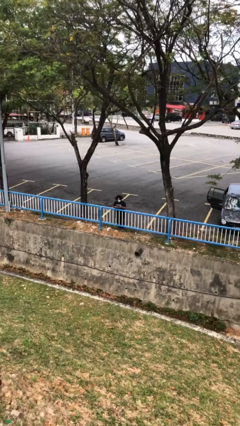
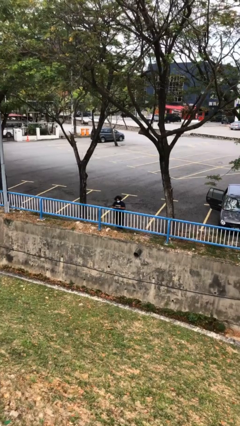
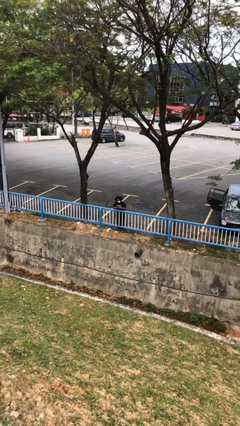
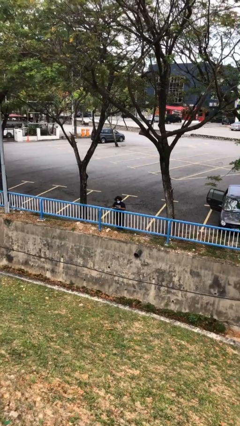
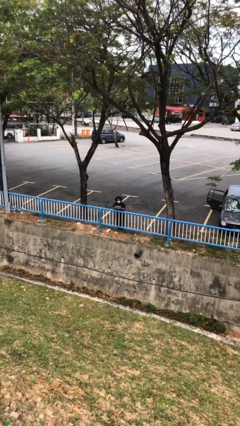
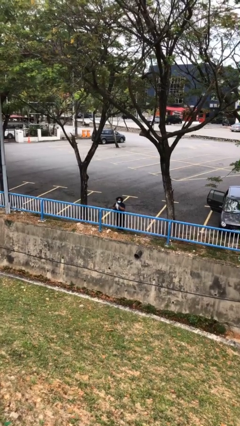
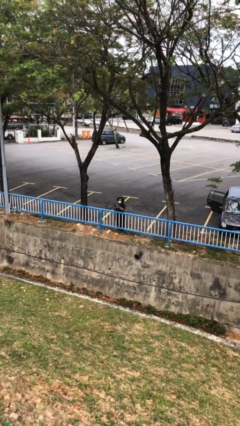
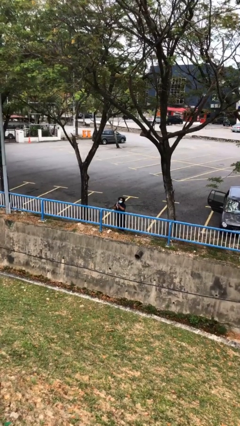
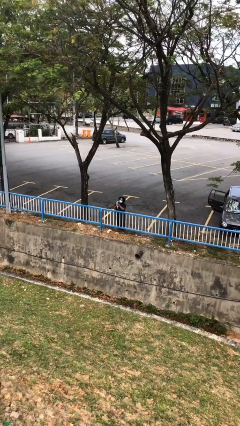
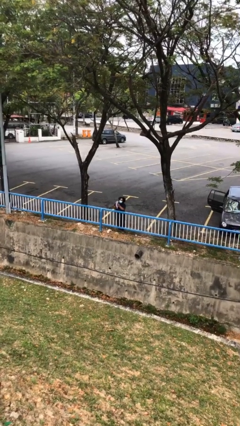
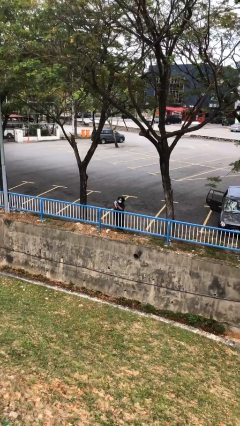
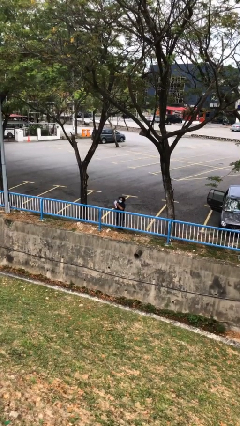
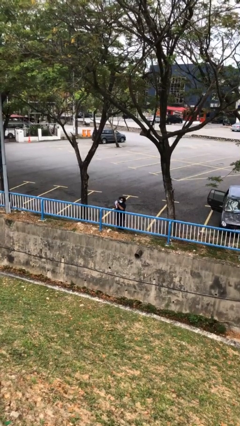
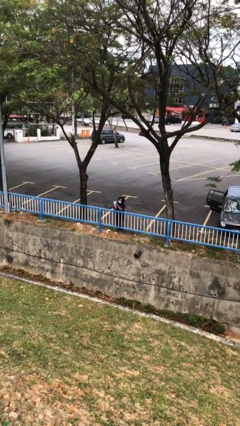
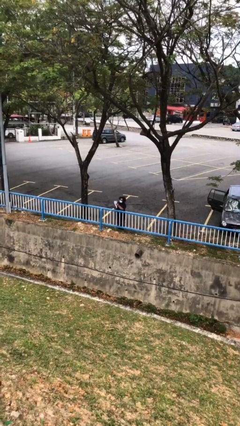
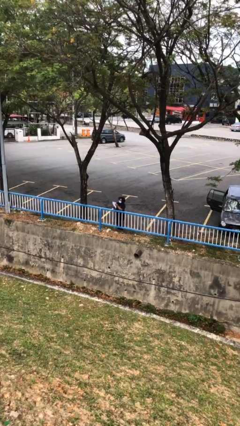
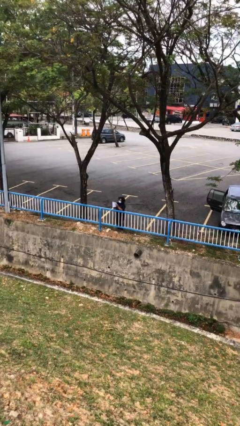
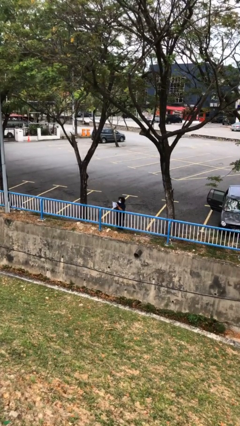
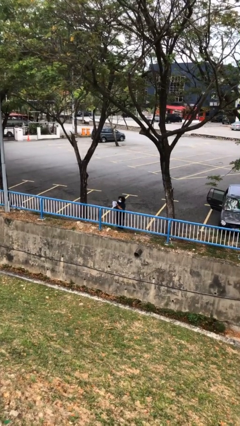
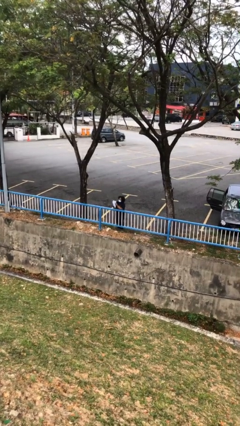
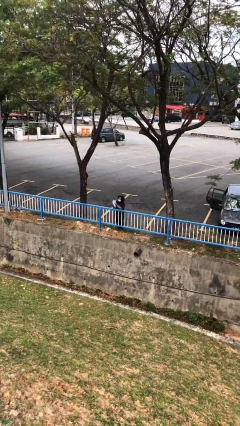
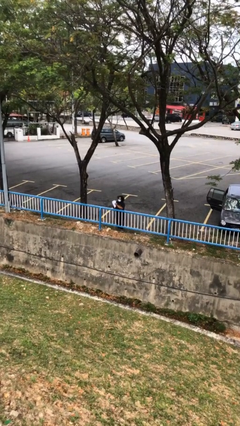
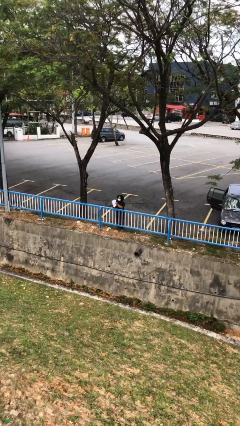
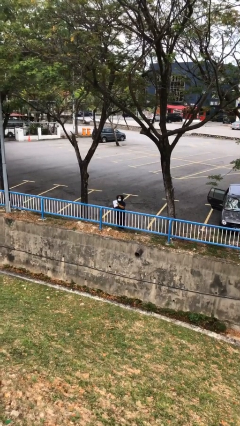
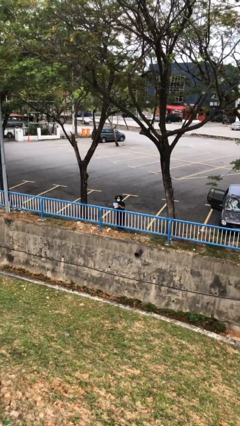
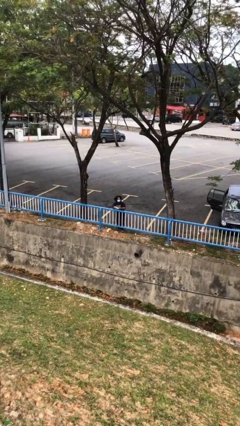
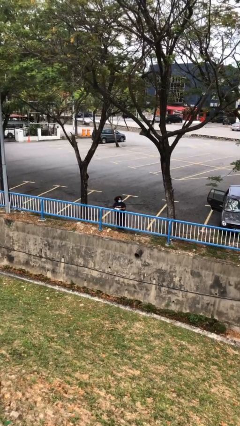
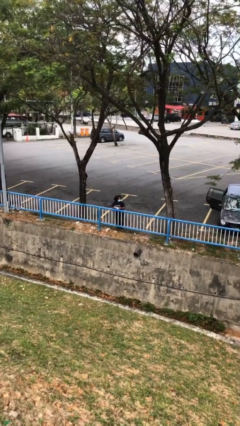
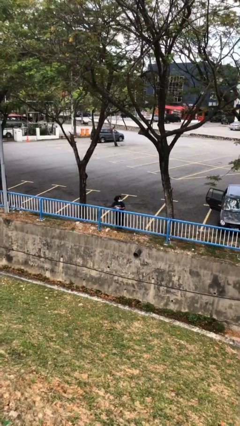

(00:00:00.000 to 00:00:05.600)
person reads document

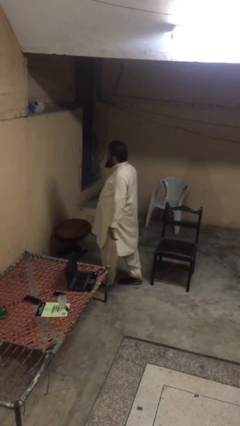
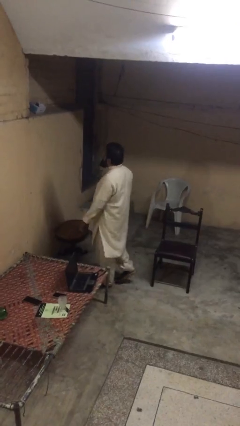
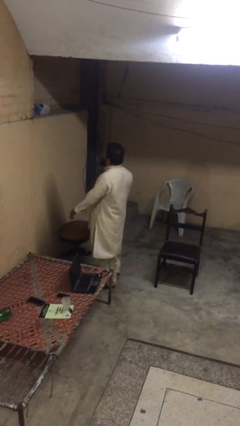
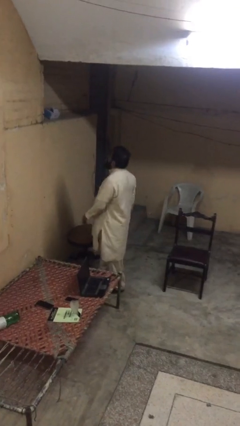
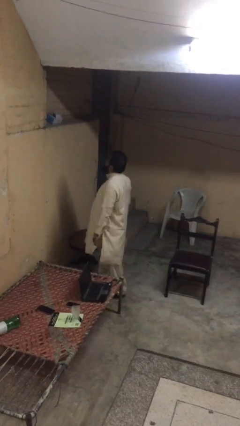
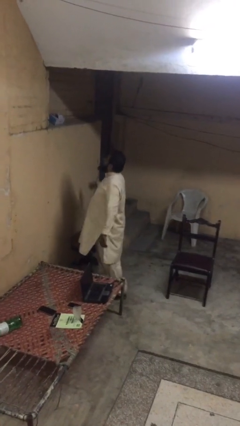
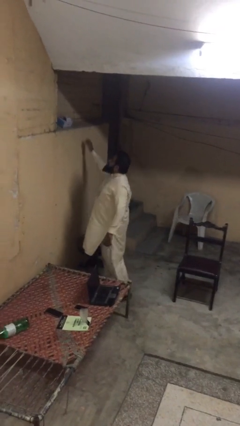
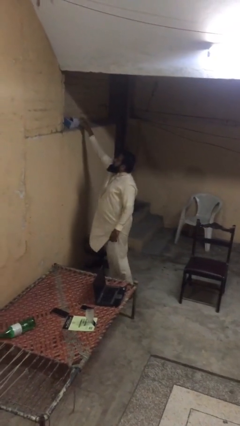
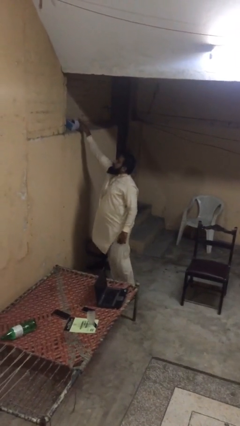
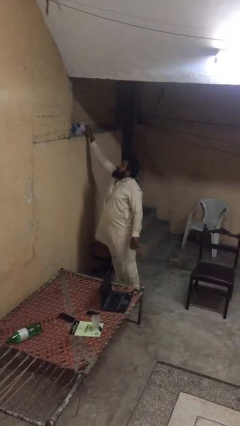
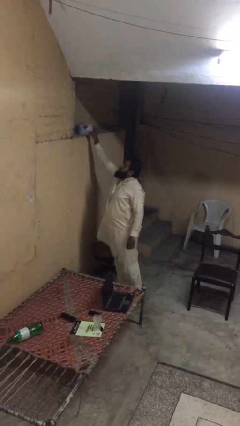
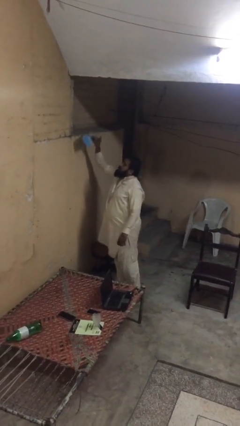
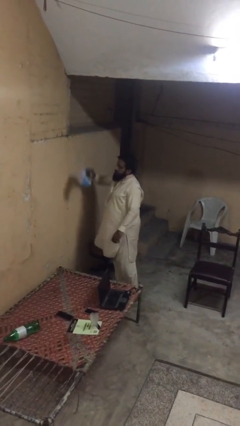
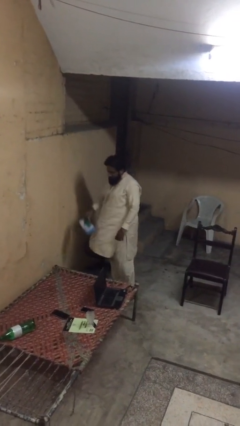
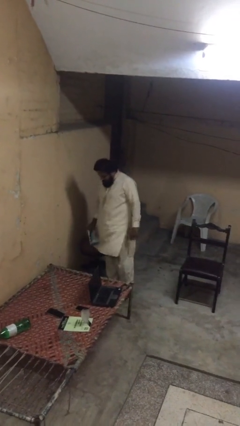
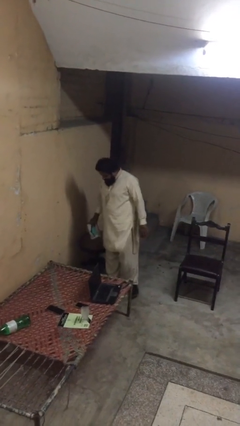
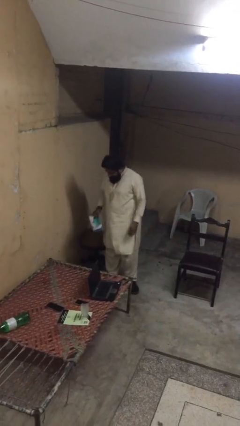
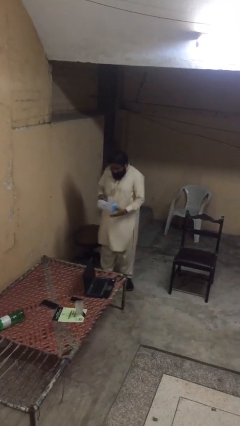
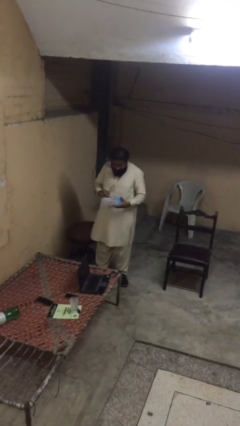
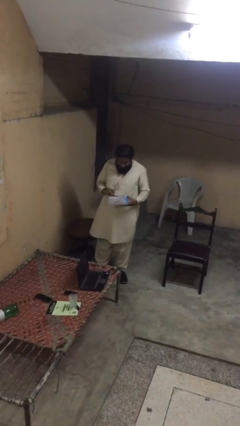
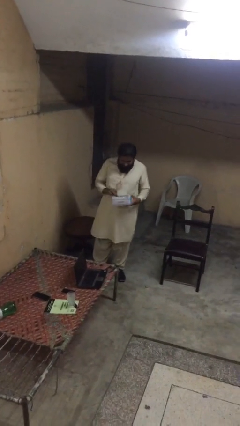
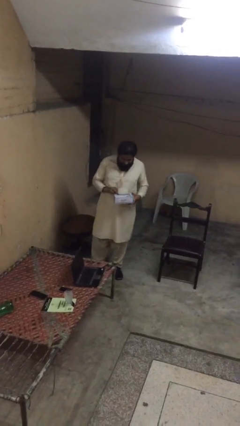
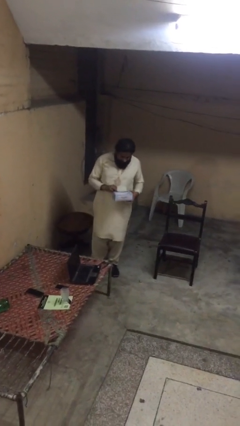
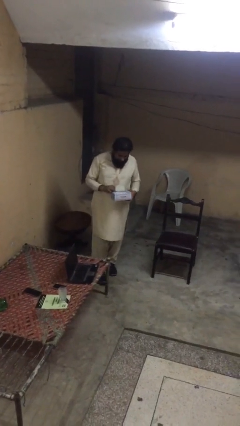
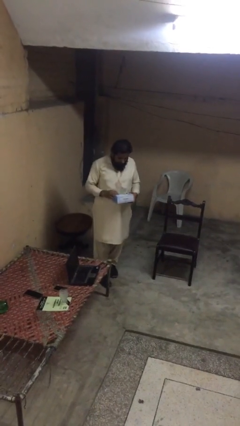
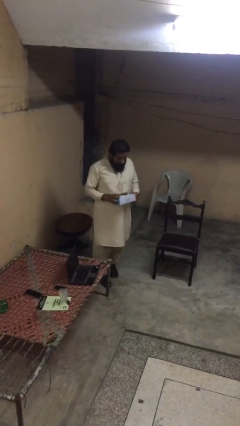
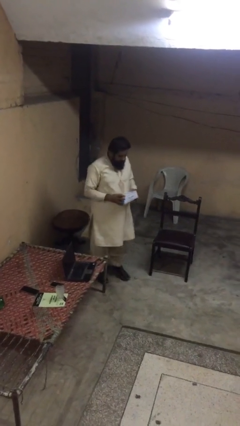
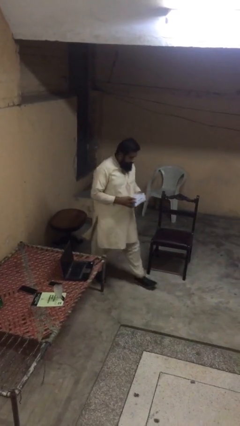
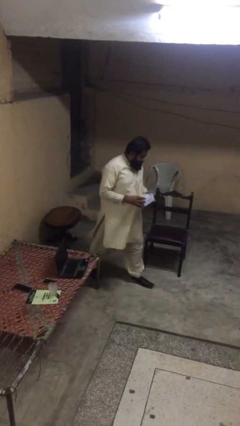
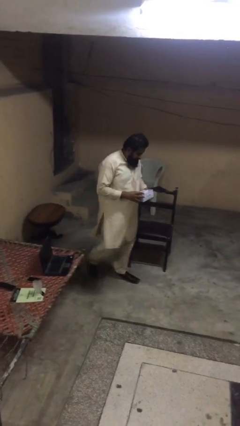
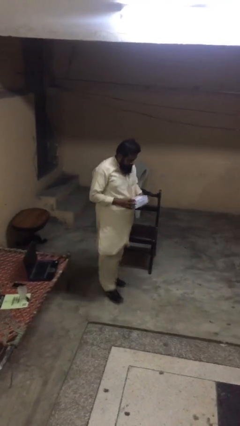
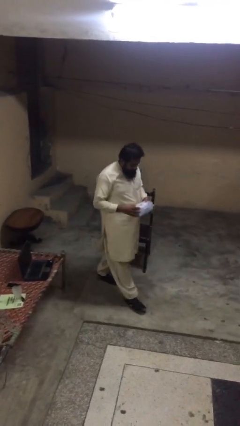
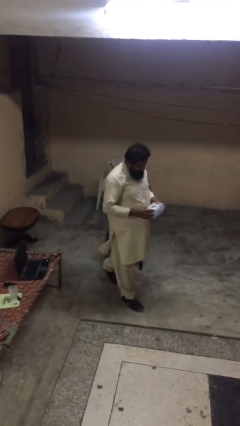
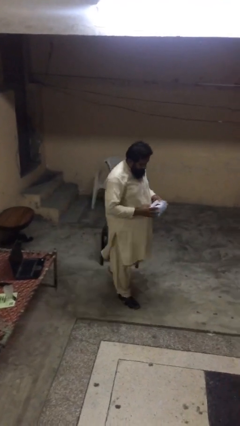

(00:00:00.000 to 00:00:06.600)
person picks up object from shelf

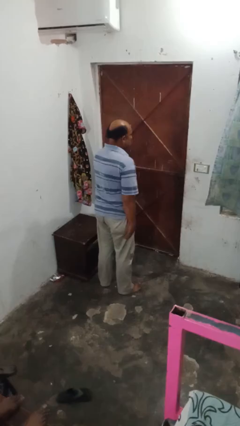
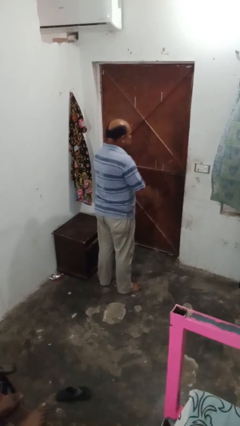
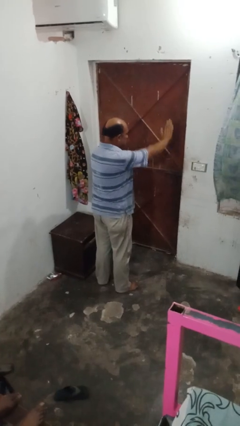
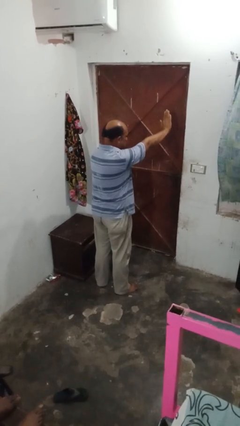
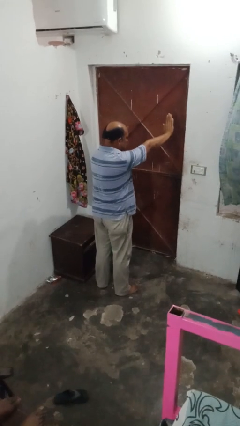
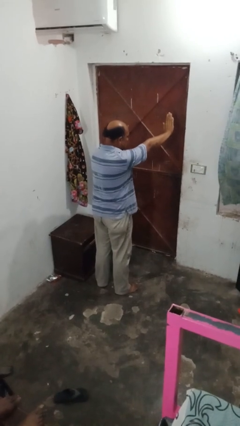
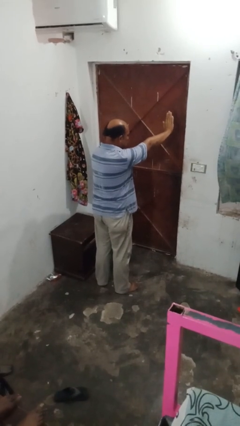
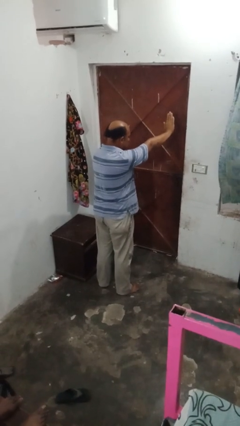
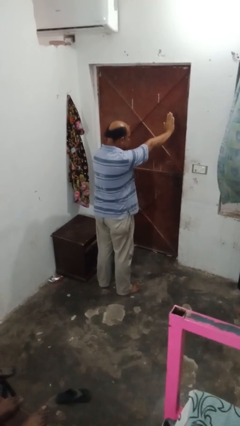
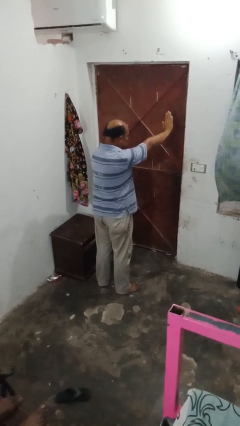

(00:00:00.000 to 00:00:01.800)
person gestures stop

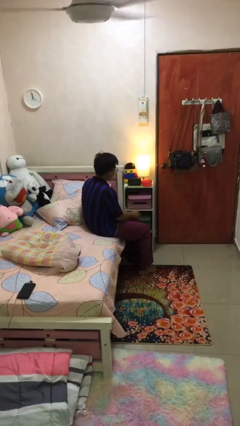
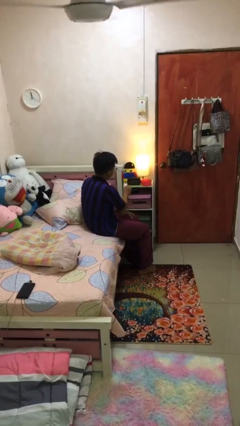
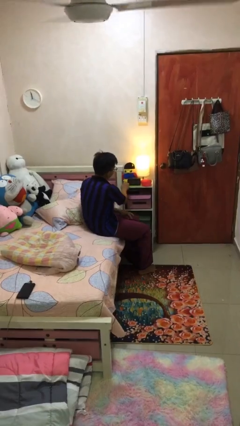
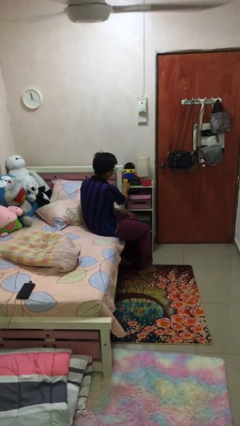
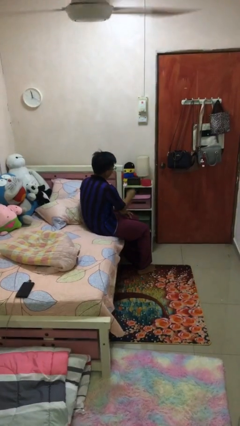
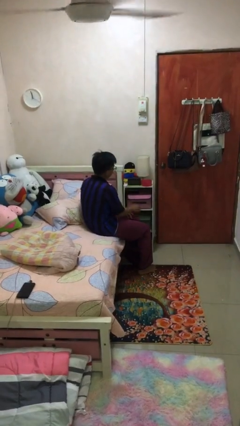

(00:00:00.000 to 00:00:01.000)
person turns off lamp

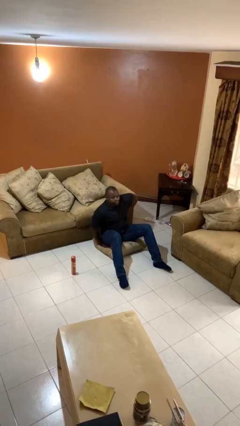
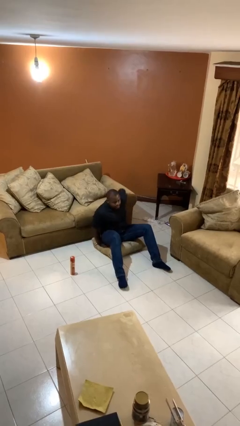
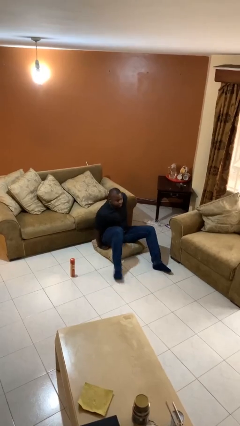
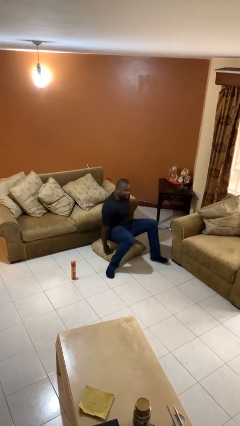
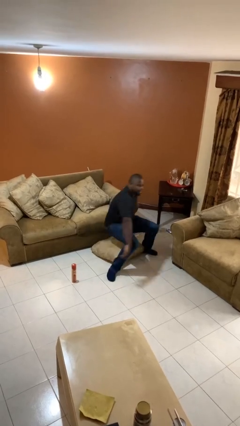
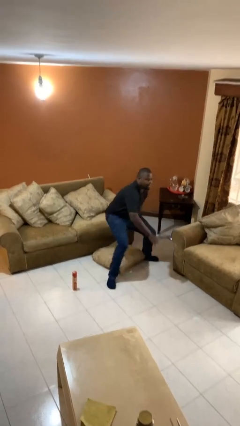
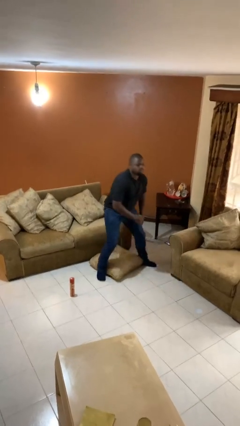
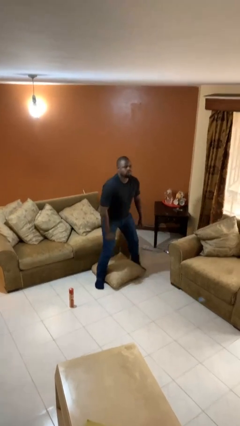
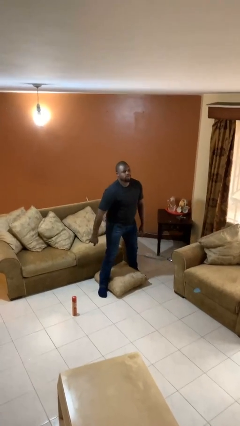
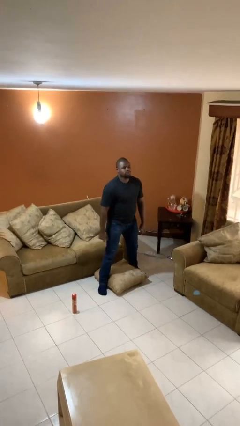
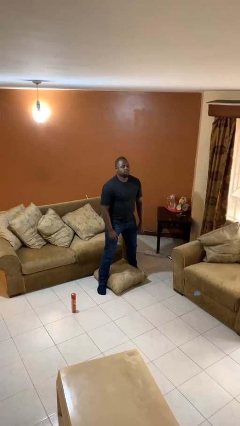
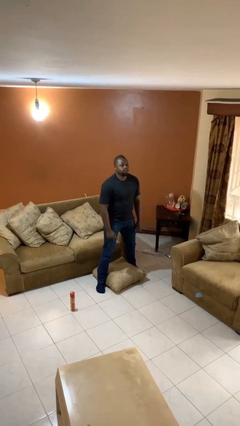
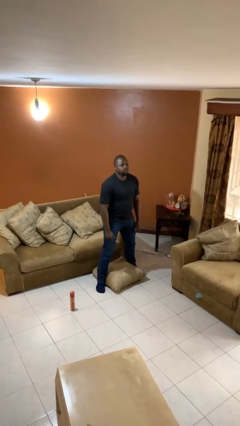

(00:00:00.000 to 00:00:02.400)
person stands up from floor
